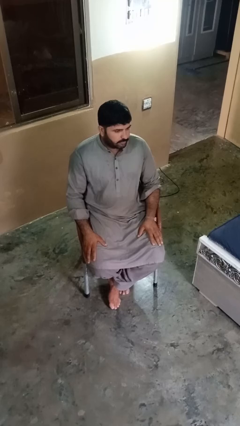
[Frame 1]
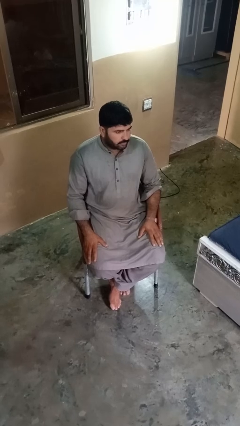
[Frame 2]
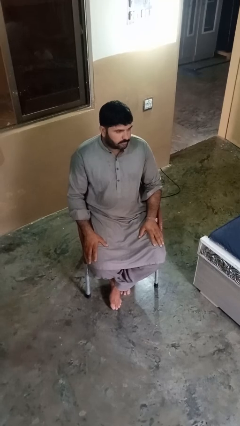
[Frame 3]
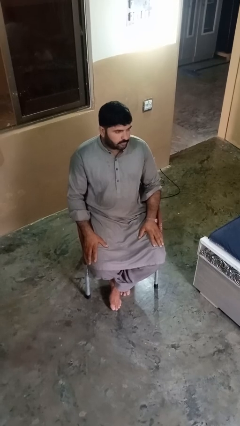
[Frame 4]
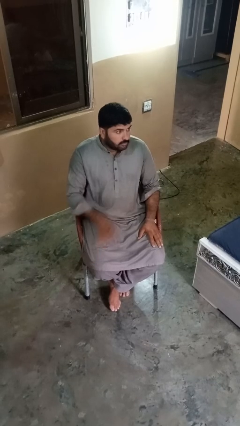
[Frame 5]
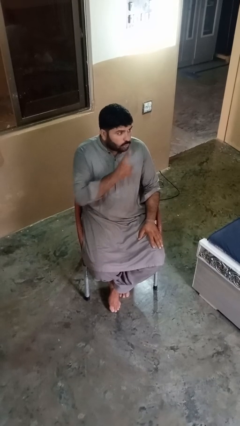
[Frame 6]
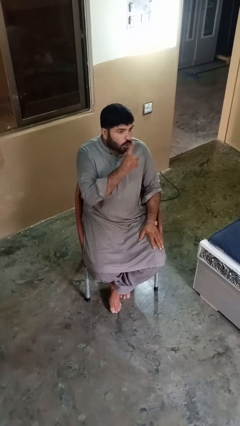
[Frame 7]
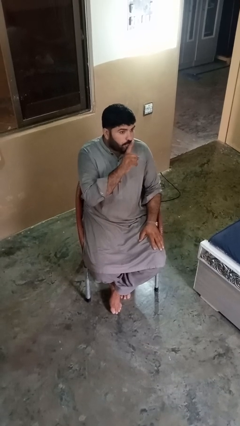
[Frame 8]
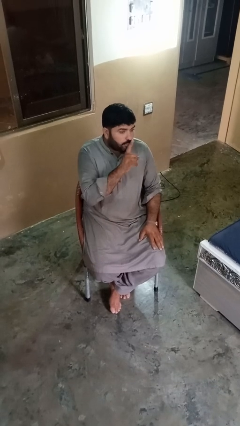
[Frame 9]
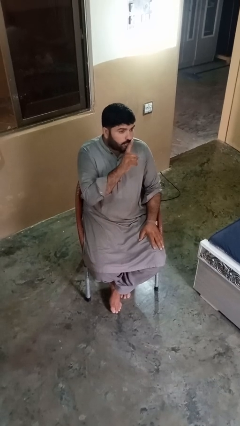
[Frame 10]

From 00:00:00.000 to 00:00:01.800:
person gestures be quiet

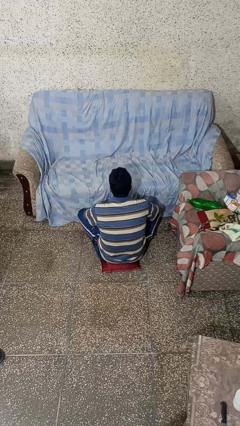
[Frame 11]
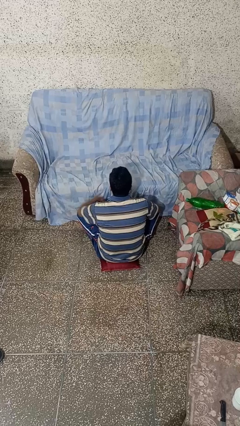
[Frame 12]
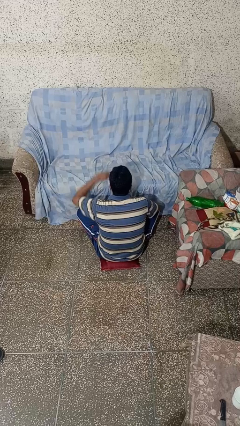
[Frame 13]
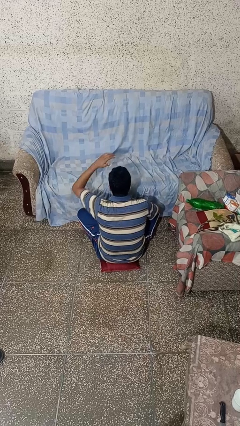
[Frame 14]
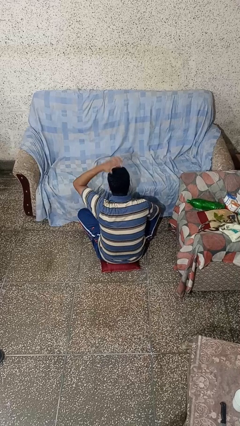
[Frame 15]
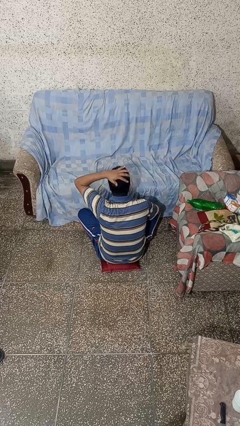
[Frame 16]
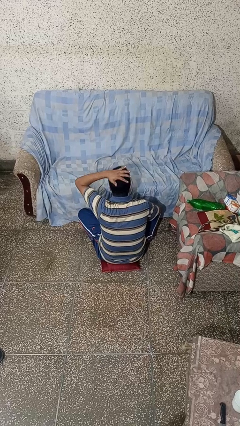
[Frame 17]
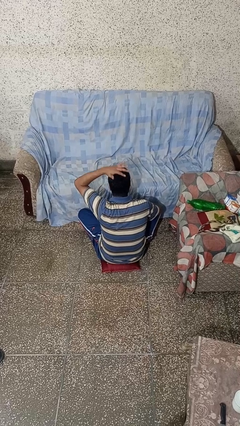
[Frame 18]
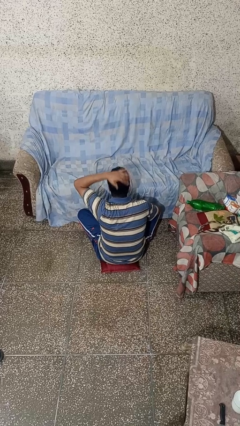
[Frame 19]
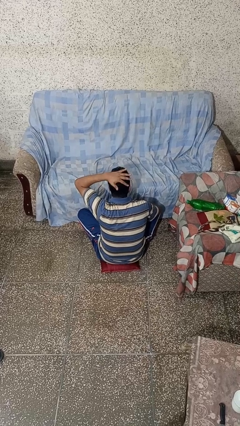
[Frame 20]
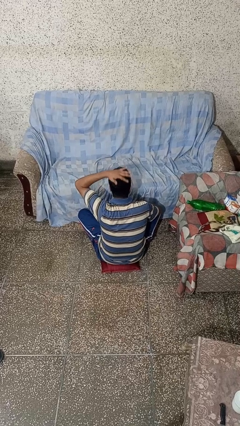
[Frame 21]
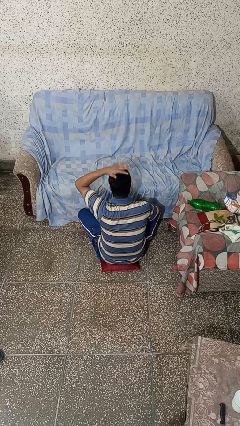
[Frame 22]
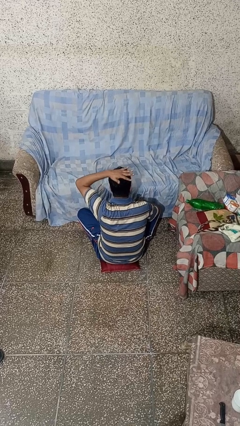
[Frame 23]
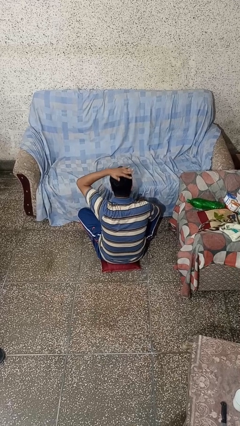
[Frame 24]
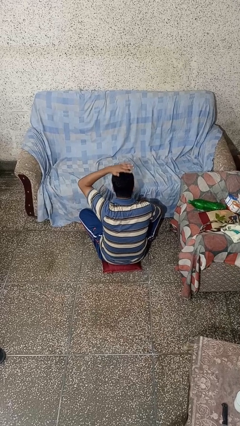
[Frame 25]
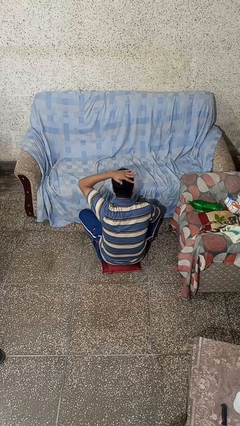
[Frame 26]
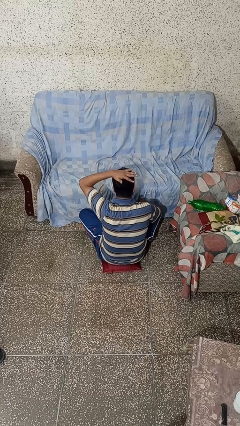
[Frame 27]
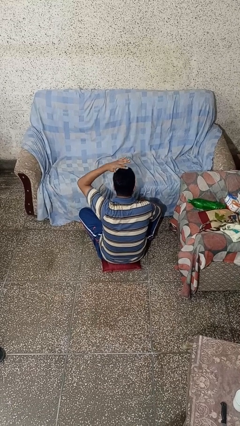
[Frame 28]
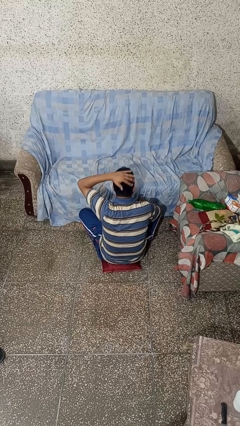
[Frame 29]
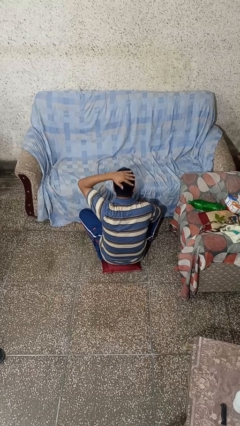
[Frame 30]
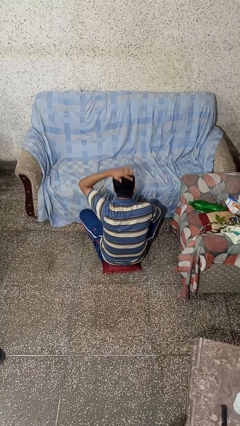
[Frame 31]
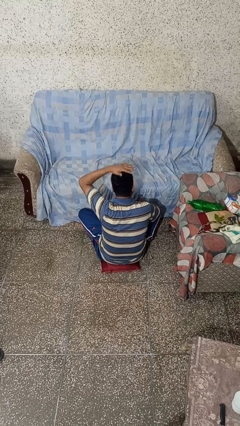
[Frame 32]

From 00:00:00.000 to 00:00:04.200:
person pats head

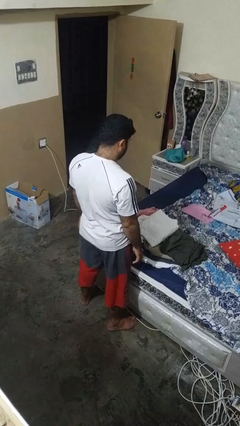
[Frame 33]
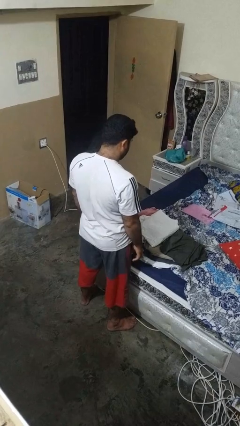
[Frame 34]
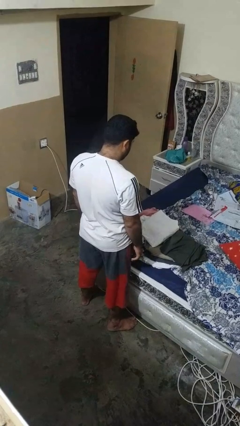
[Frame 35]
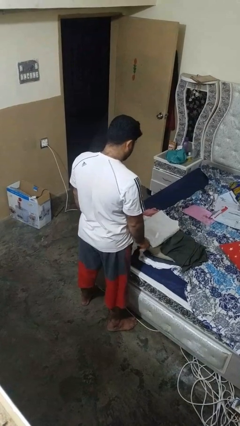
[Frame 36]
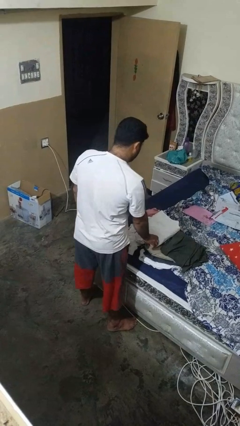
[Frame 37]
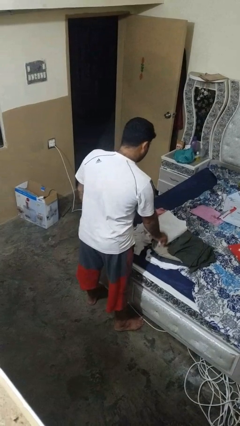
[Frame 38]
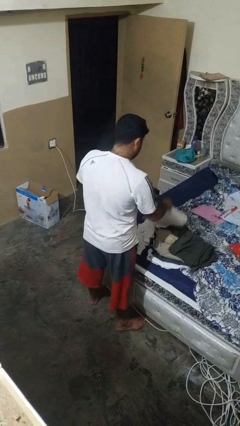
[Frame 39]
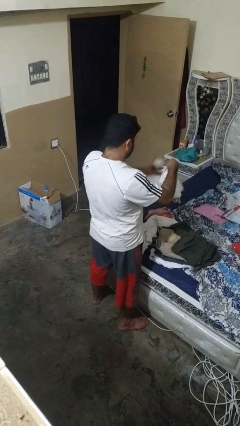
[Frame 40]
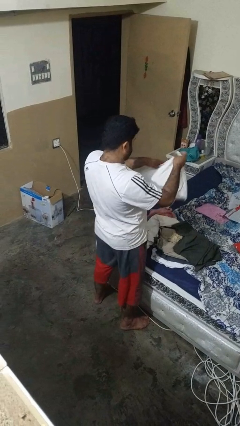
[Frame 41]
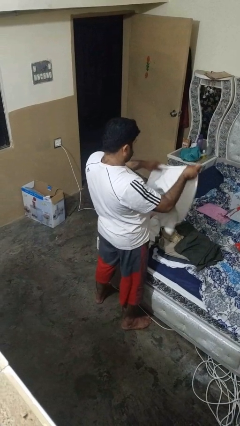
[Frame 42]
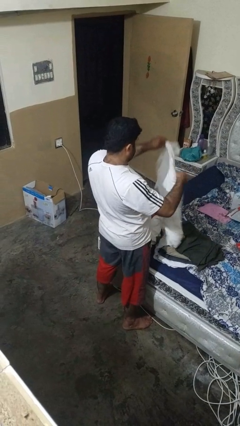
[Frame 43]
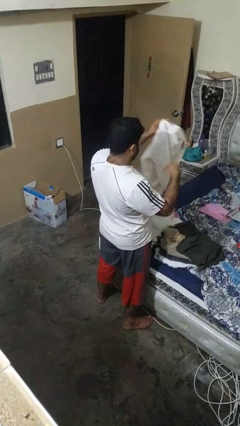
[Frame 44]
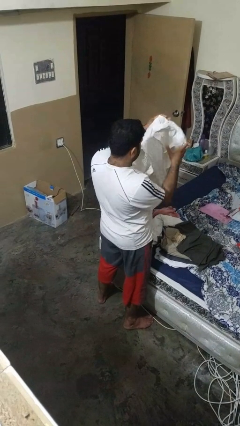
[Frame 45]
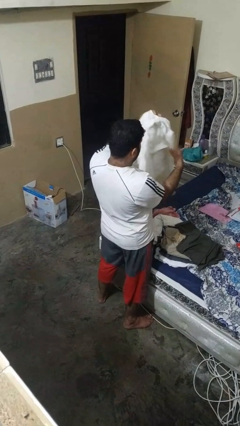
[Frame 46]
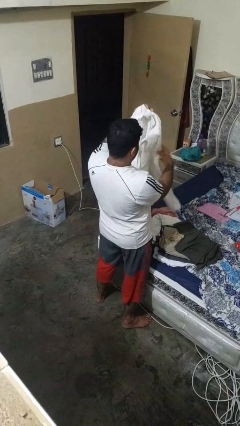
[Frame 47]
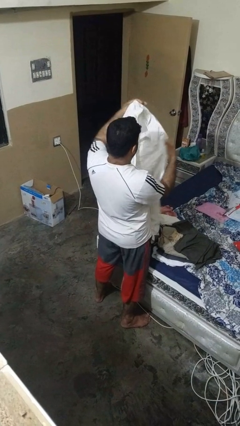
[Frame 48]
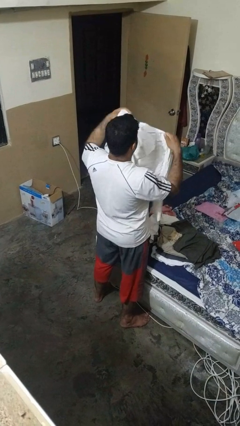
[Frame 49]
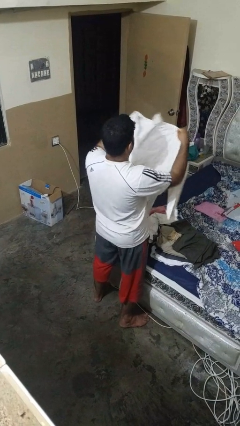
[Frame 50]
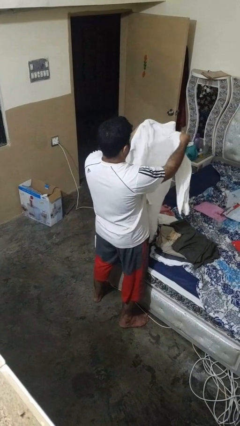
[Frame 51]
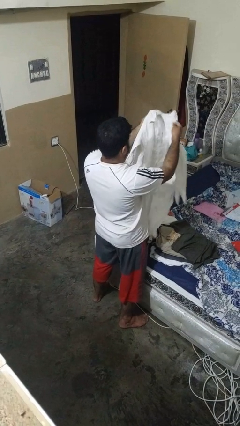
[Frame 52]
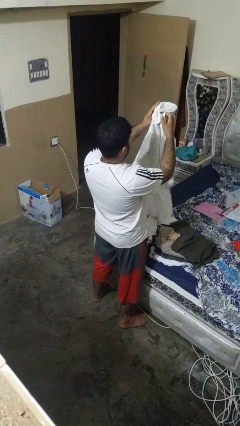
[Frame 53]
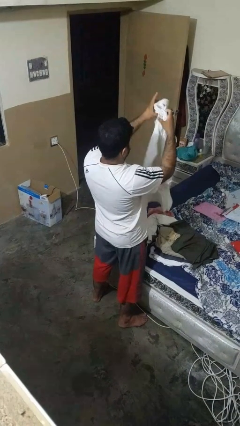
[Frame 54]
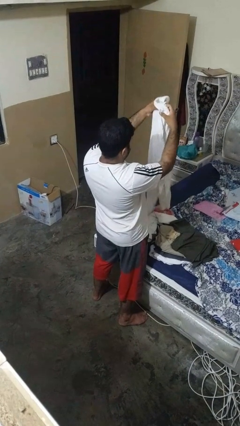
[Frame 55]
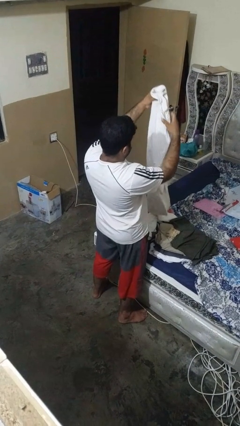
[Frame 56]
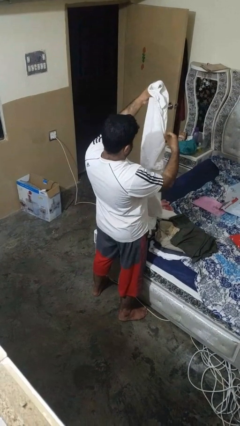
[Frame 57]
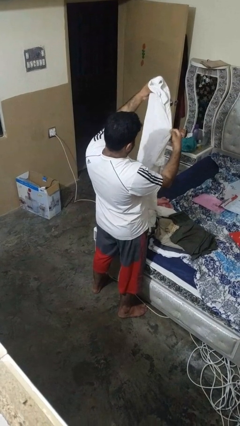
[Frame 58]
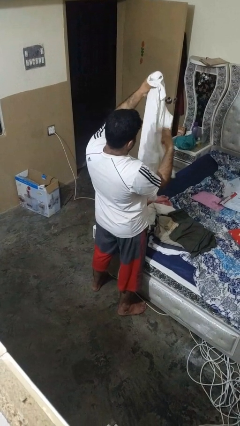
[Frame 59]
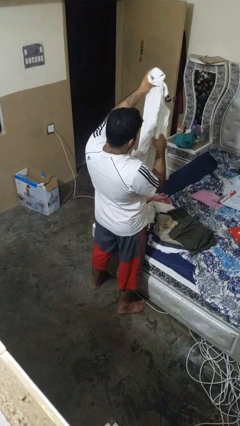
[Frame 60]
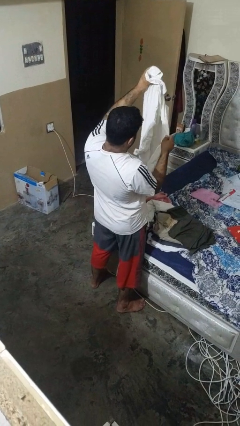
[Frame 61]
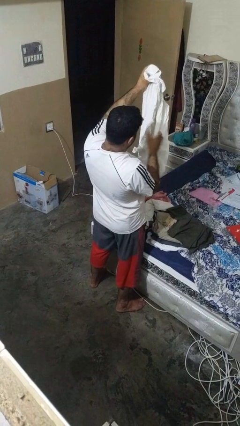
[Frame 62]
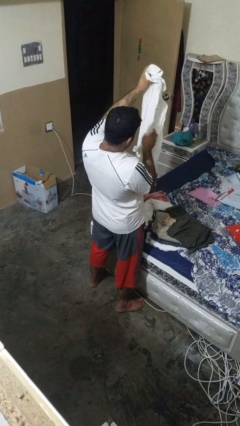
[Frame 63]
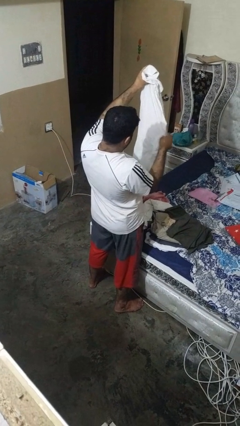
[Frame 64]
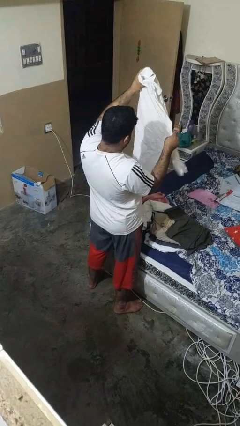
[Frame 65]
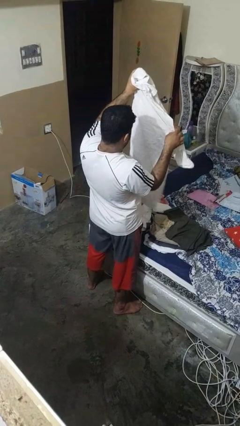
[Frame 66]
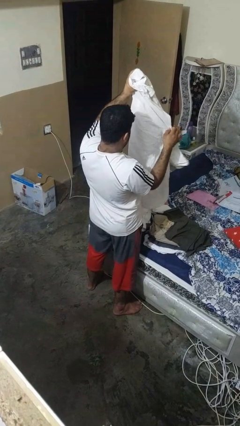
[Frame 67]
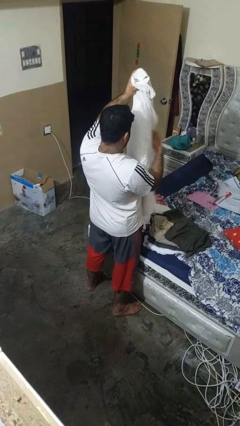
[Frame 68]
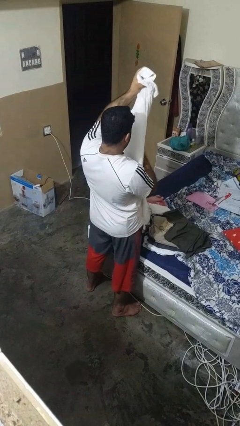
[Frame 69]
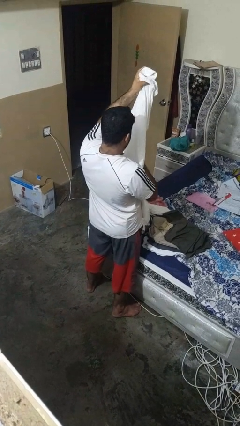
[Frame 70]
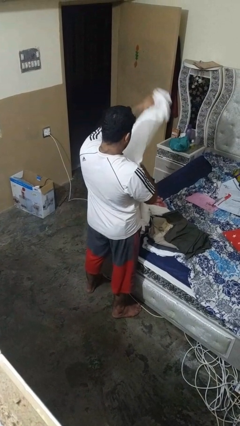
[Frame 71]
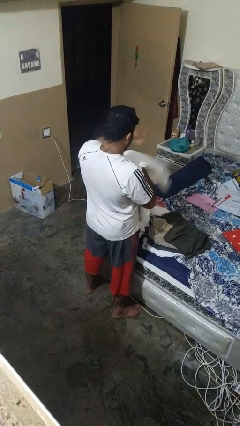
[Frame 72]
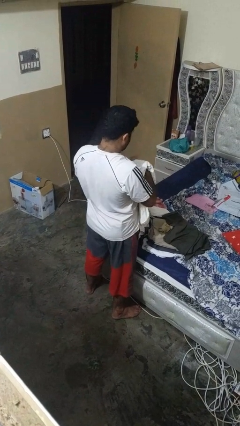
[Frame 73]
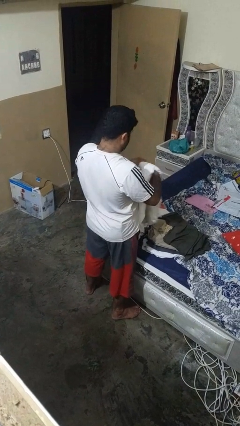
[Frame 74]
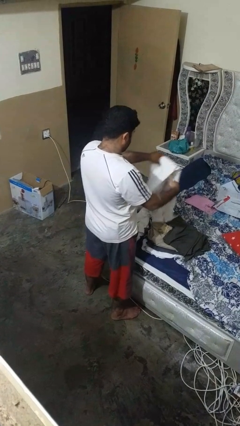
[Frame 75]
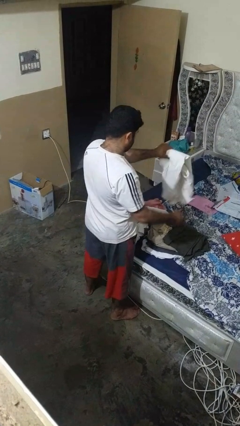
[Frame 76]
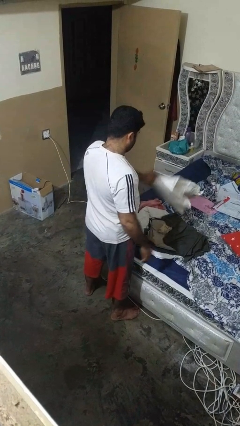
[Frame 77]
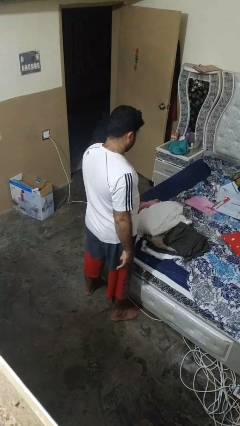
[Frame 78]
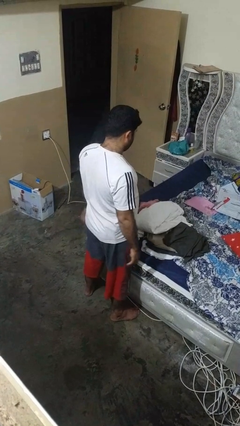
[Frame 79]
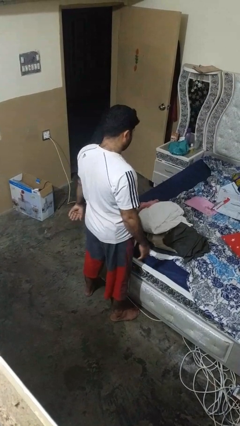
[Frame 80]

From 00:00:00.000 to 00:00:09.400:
person folds shirt

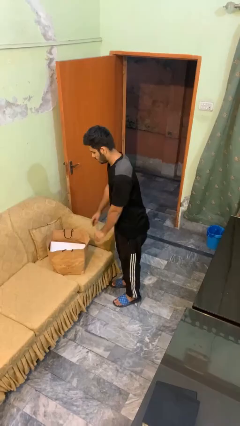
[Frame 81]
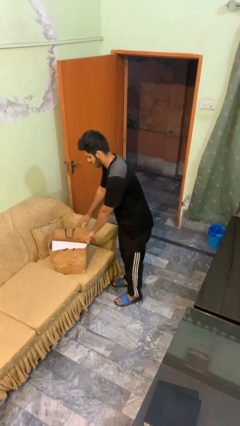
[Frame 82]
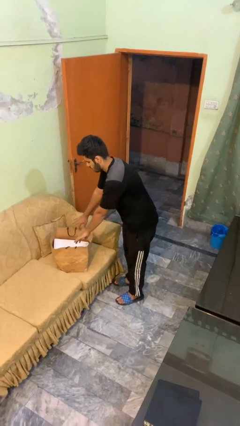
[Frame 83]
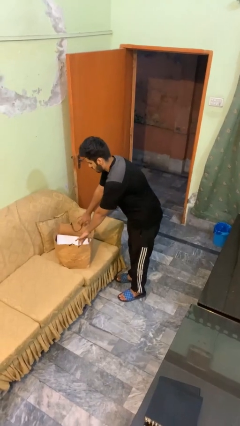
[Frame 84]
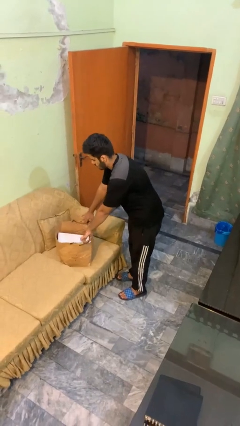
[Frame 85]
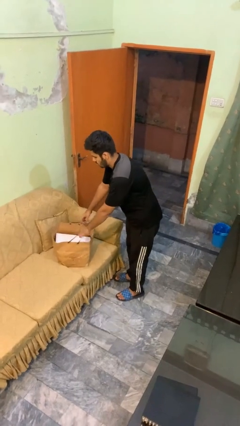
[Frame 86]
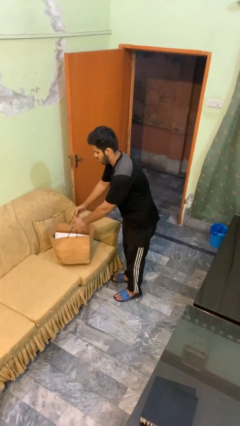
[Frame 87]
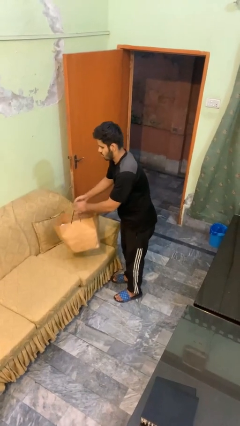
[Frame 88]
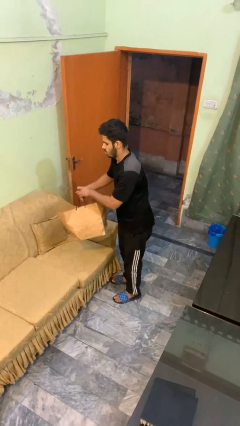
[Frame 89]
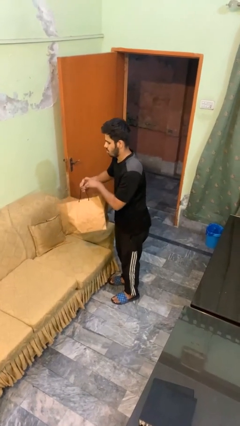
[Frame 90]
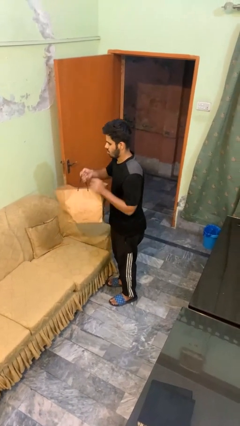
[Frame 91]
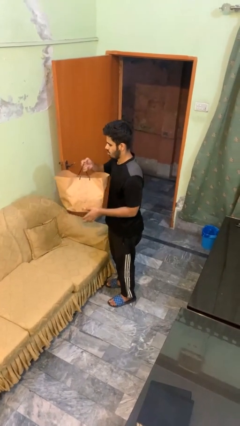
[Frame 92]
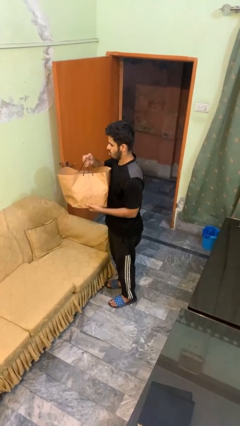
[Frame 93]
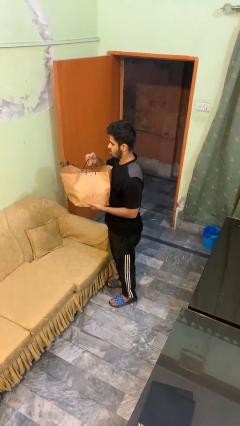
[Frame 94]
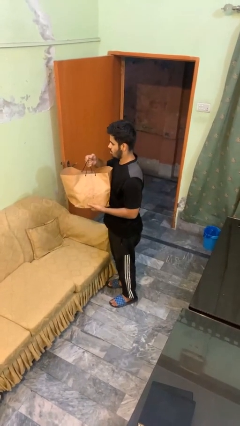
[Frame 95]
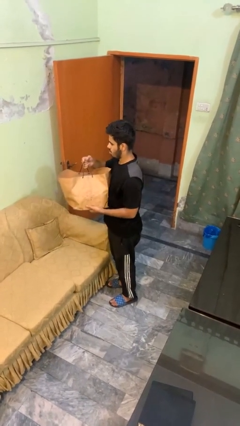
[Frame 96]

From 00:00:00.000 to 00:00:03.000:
person picks up object from couch
